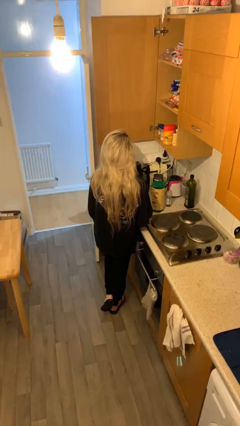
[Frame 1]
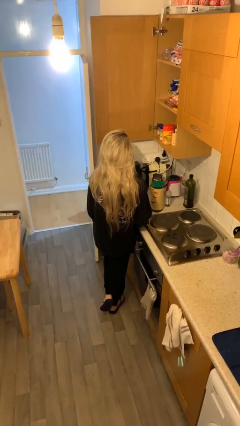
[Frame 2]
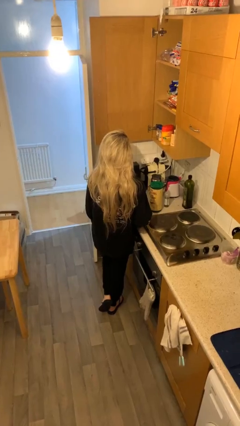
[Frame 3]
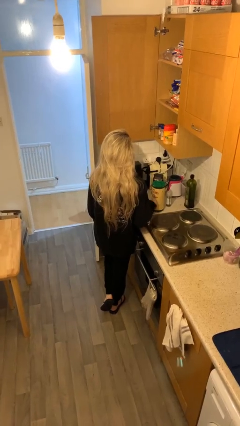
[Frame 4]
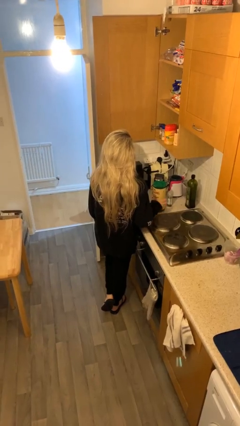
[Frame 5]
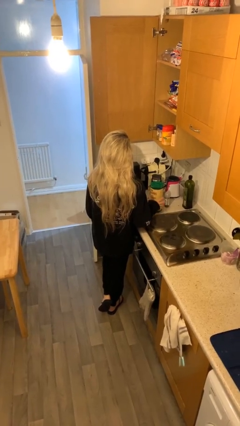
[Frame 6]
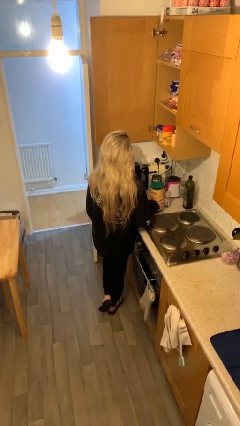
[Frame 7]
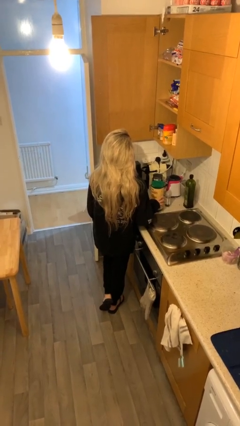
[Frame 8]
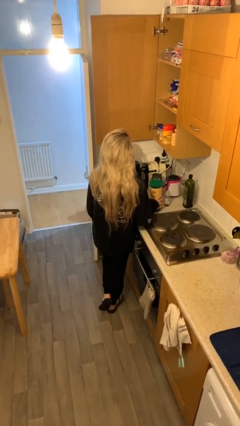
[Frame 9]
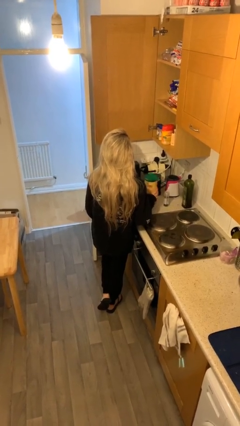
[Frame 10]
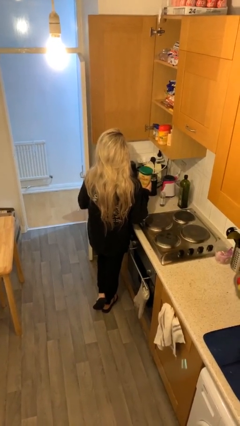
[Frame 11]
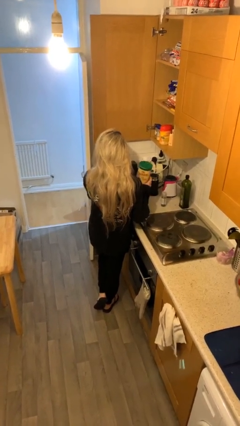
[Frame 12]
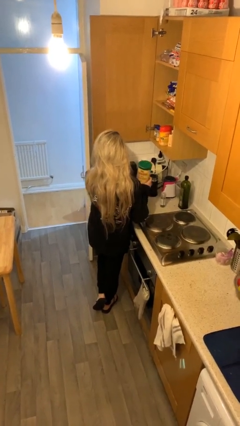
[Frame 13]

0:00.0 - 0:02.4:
person picks up object from table

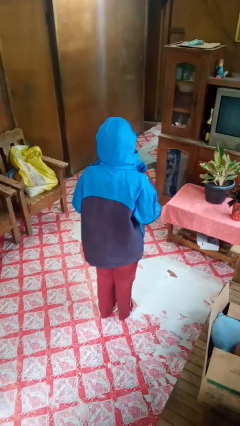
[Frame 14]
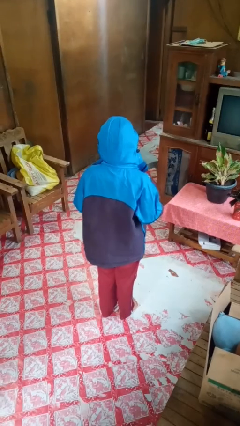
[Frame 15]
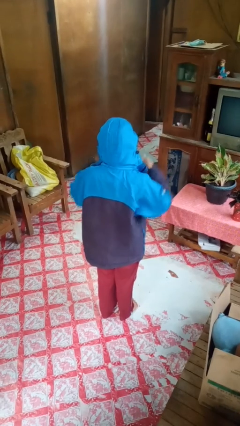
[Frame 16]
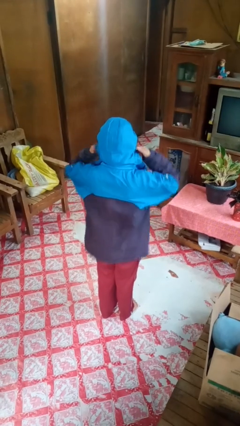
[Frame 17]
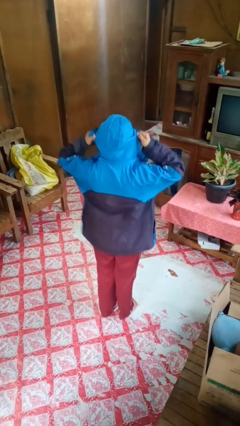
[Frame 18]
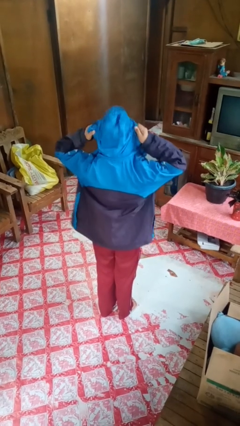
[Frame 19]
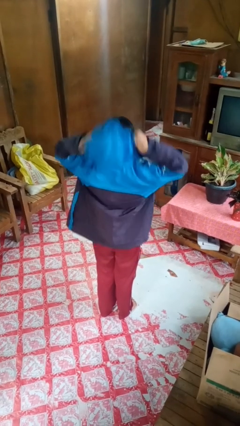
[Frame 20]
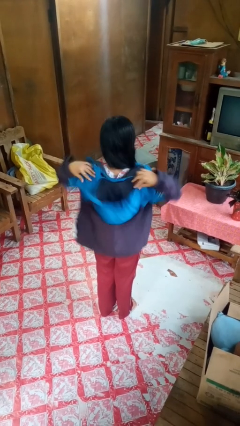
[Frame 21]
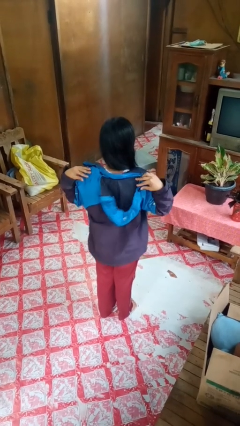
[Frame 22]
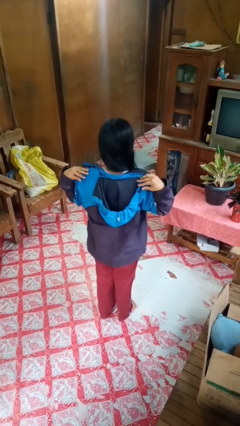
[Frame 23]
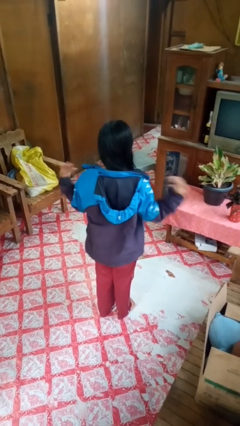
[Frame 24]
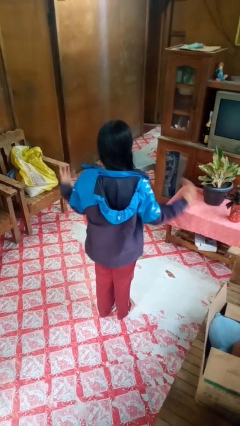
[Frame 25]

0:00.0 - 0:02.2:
person takes off hoodie

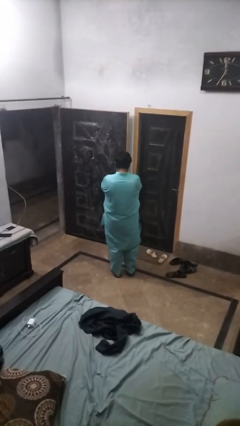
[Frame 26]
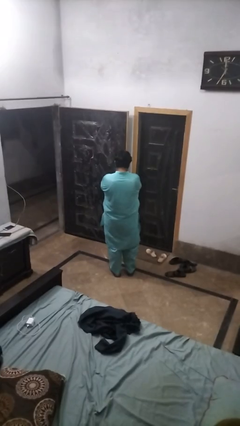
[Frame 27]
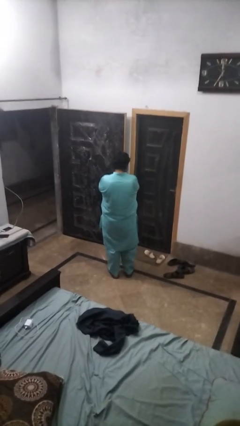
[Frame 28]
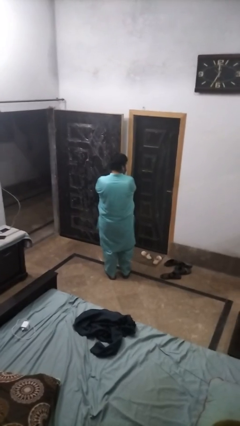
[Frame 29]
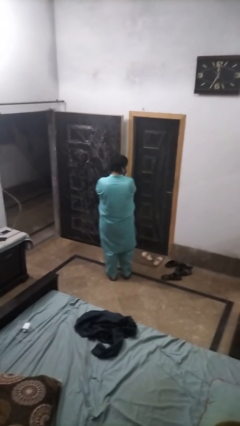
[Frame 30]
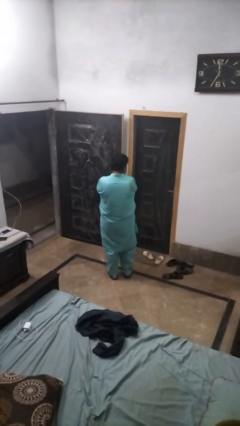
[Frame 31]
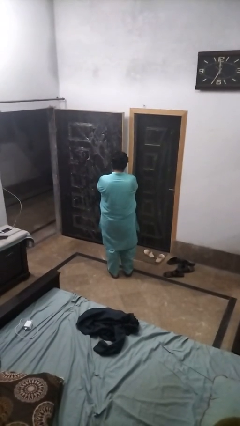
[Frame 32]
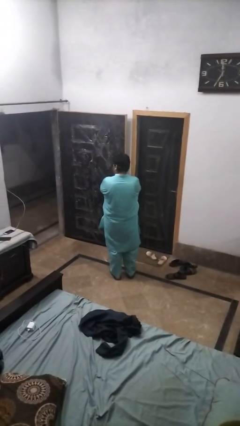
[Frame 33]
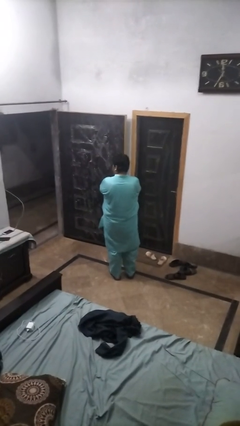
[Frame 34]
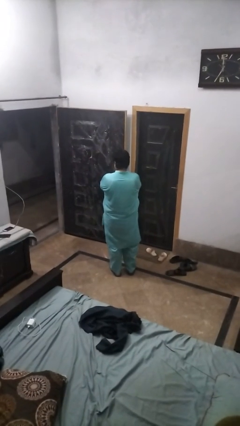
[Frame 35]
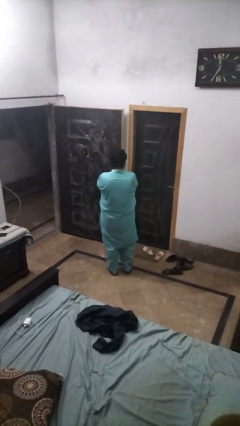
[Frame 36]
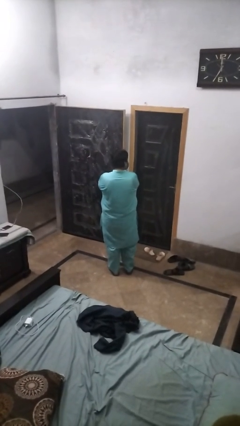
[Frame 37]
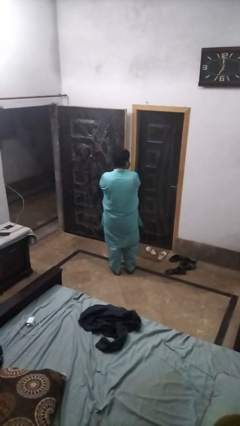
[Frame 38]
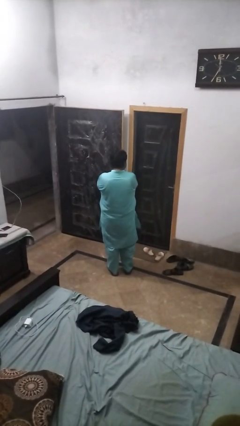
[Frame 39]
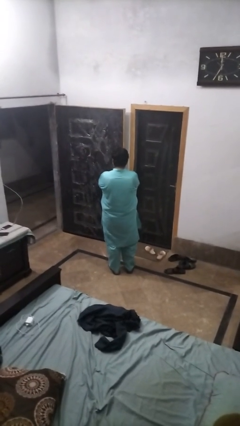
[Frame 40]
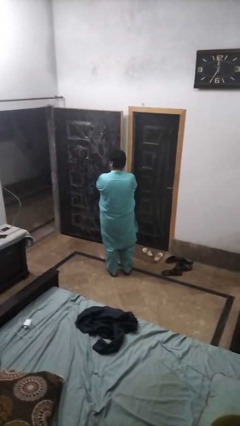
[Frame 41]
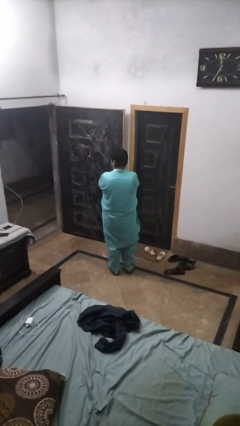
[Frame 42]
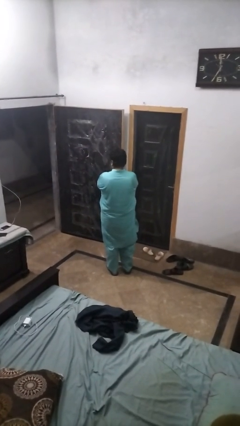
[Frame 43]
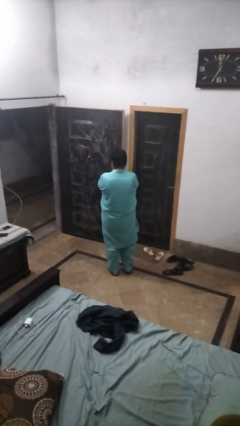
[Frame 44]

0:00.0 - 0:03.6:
person shakes head

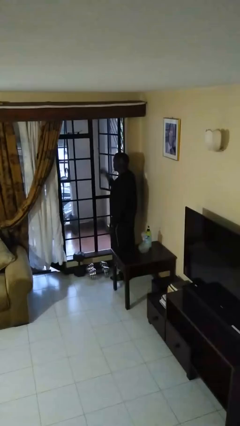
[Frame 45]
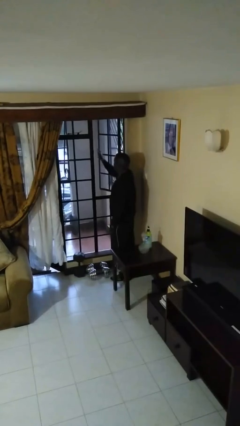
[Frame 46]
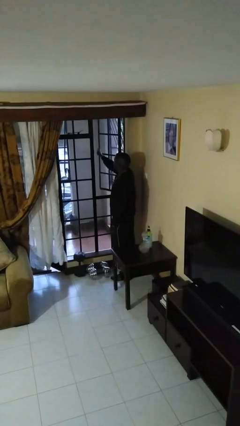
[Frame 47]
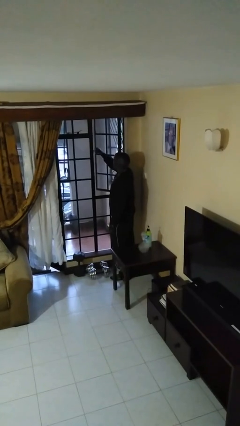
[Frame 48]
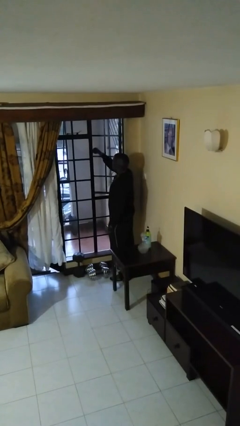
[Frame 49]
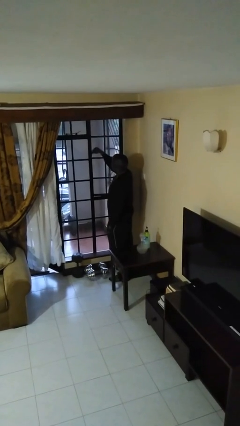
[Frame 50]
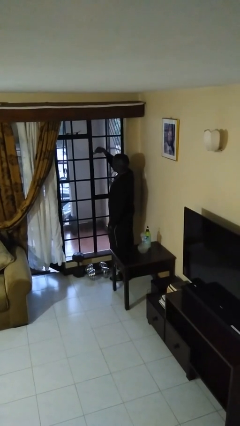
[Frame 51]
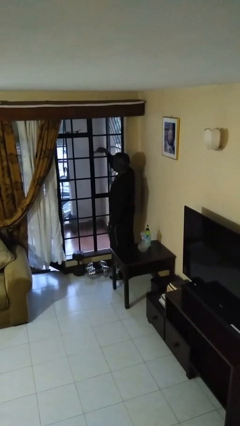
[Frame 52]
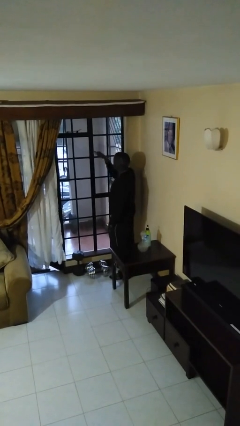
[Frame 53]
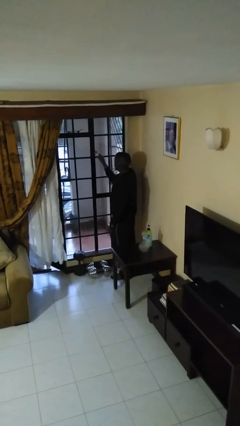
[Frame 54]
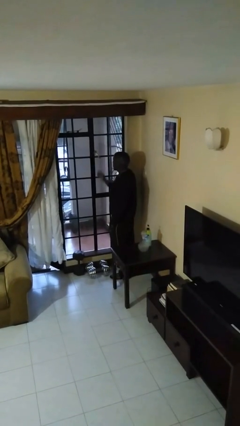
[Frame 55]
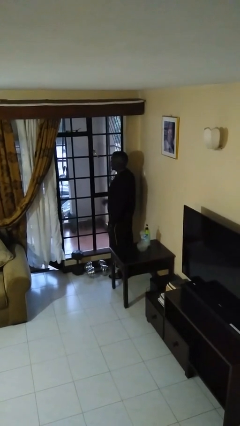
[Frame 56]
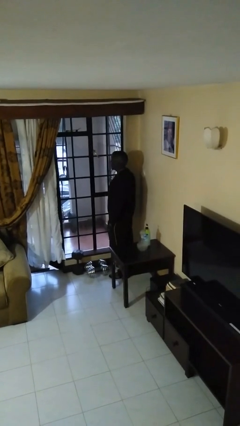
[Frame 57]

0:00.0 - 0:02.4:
person closes home window

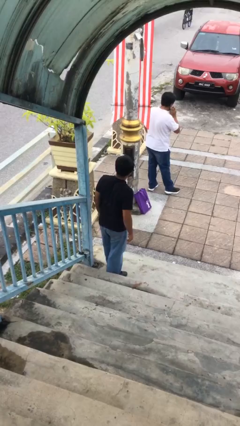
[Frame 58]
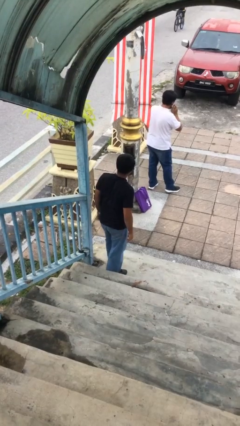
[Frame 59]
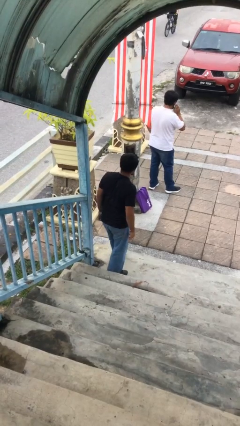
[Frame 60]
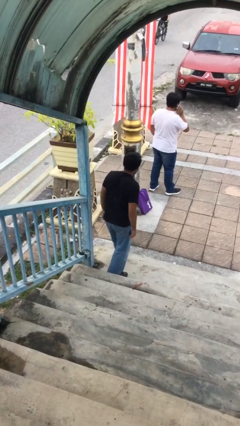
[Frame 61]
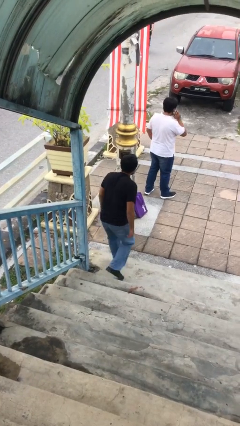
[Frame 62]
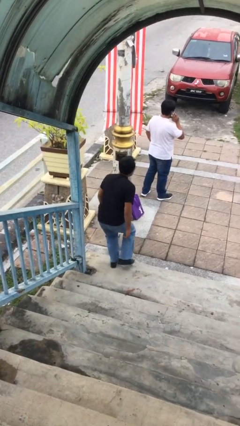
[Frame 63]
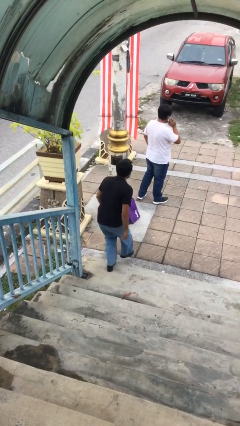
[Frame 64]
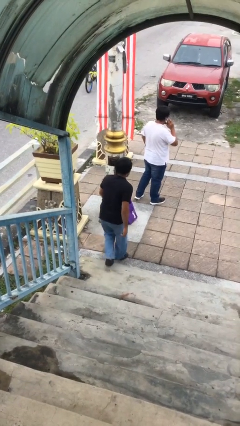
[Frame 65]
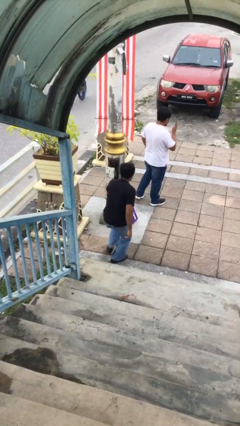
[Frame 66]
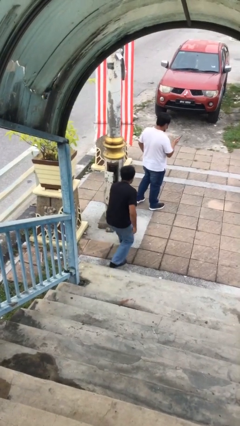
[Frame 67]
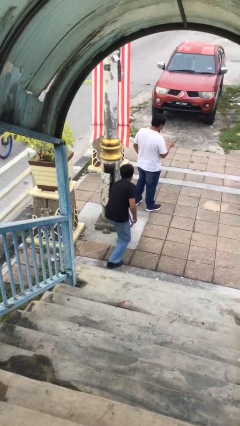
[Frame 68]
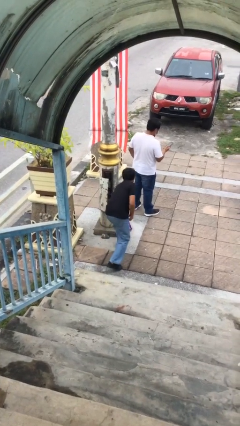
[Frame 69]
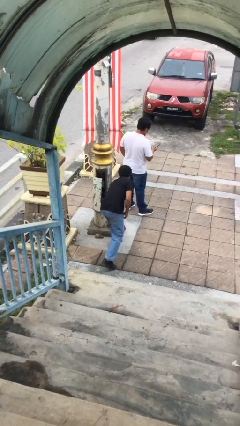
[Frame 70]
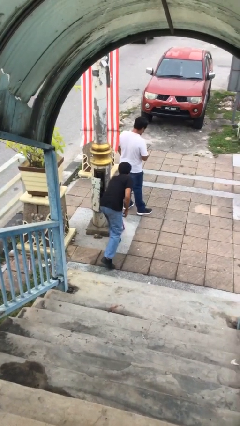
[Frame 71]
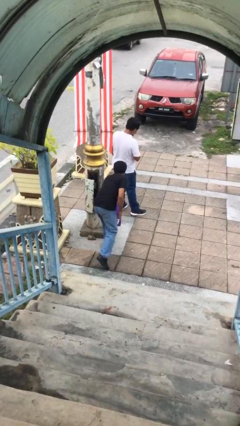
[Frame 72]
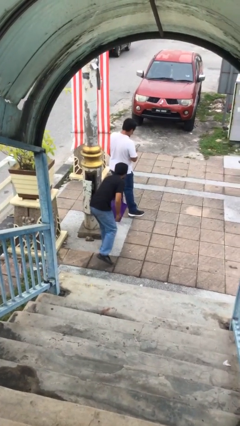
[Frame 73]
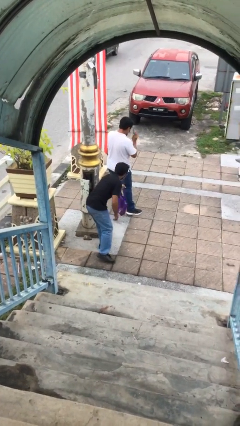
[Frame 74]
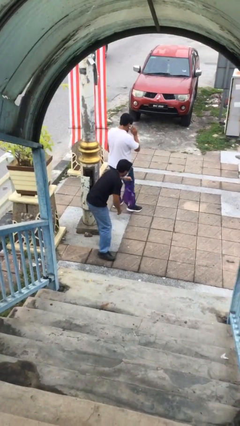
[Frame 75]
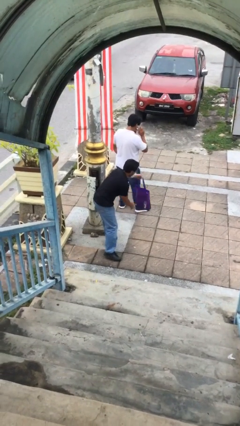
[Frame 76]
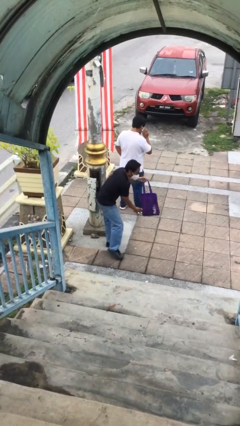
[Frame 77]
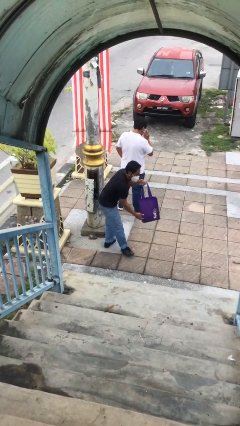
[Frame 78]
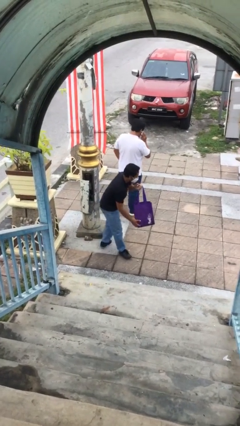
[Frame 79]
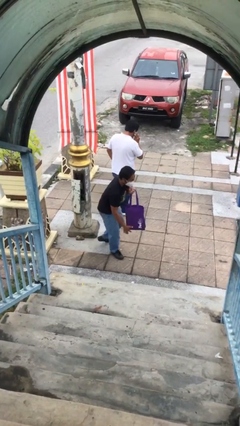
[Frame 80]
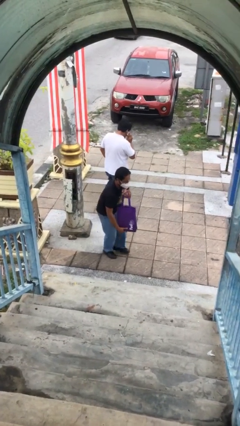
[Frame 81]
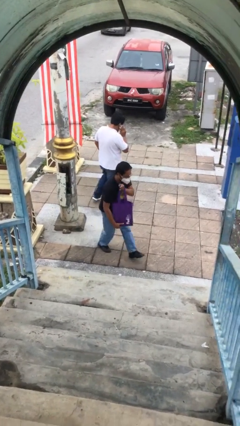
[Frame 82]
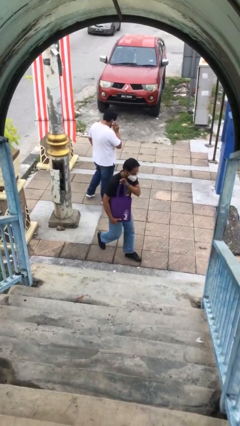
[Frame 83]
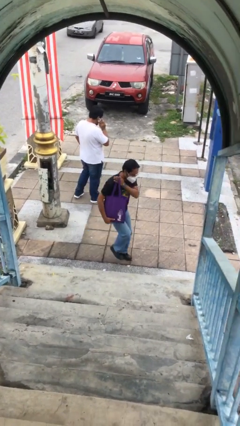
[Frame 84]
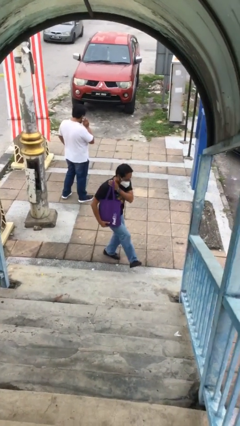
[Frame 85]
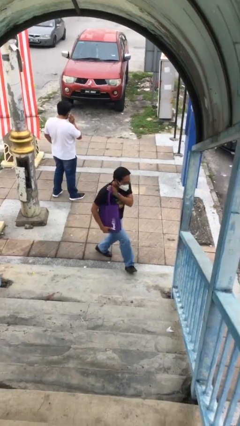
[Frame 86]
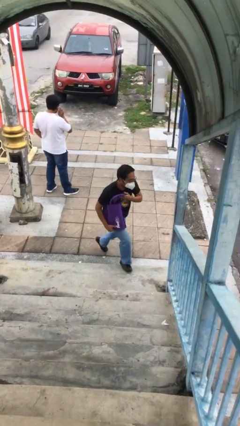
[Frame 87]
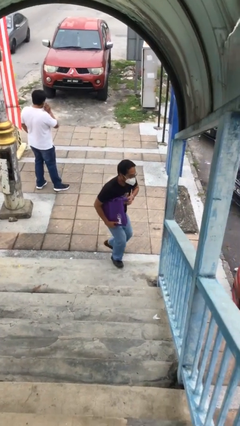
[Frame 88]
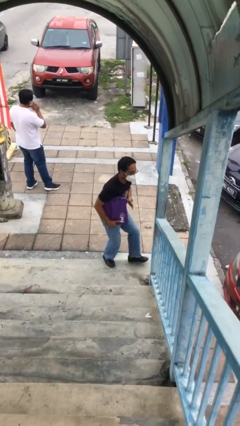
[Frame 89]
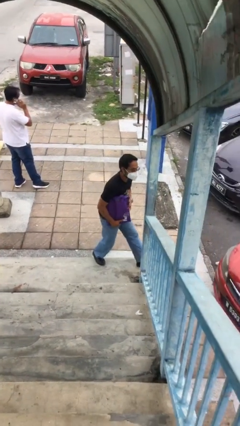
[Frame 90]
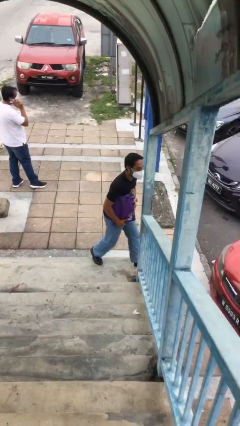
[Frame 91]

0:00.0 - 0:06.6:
person steals object from person
